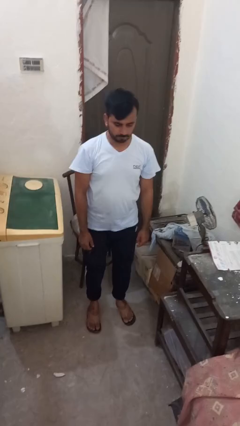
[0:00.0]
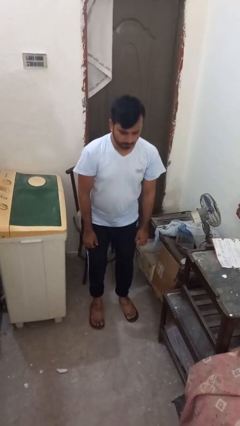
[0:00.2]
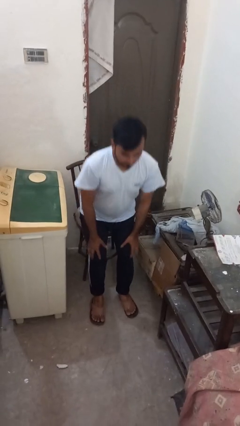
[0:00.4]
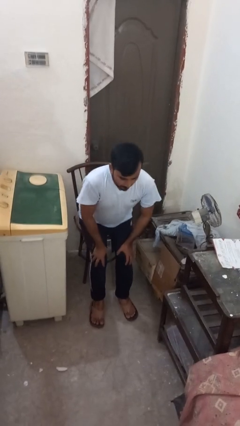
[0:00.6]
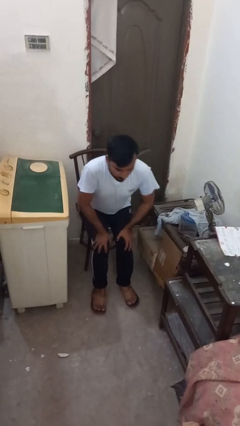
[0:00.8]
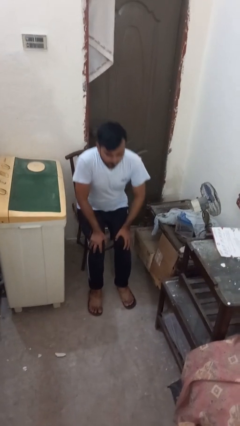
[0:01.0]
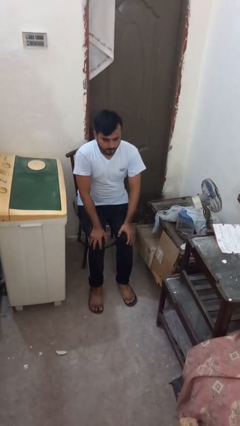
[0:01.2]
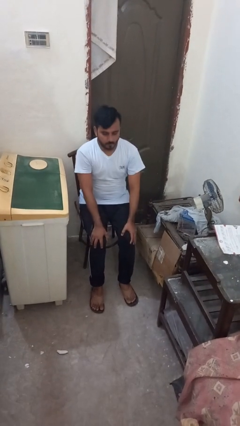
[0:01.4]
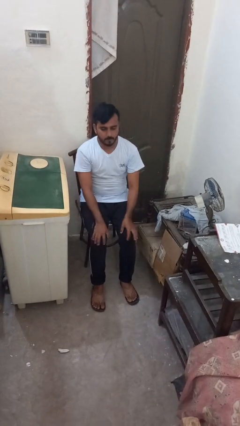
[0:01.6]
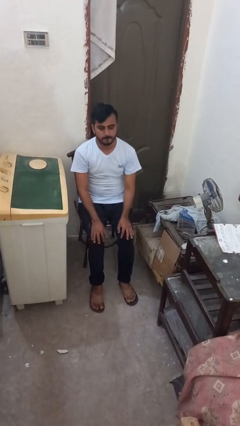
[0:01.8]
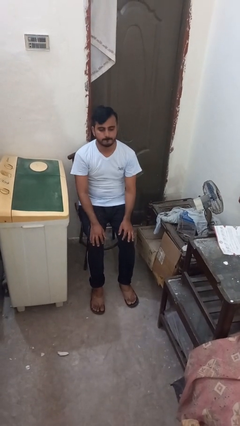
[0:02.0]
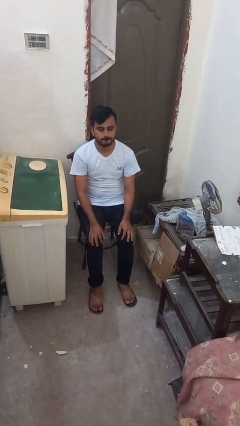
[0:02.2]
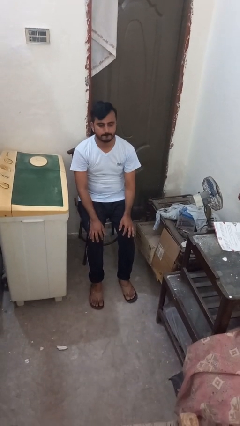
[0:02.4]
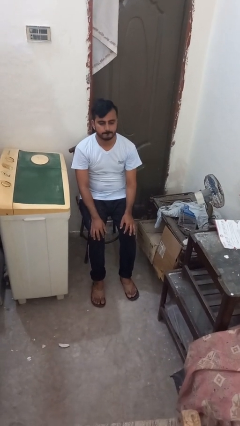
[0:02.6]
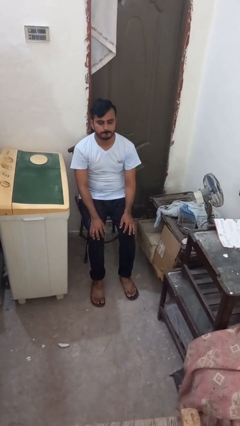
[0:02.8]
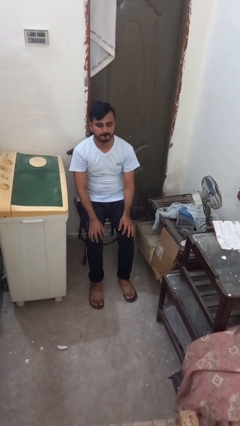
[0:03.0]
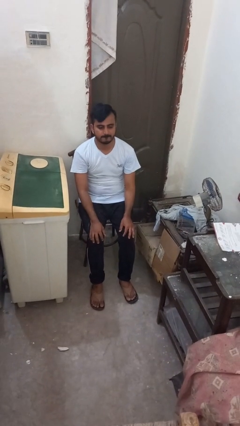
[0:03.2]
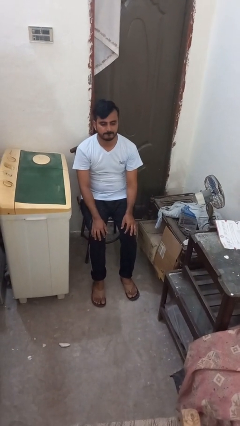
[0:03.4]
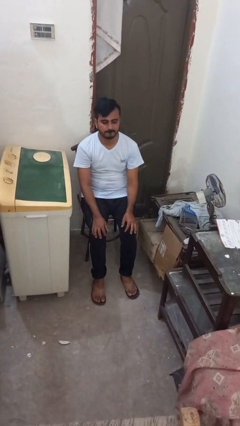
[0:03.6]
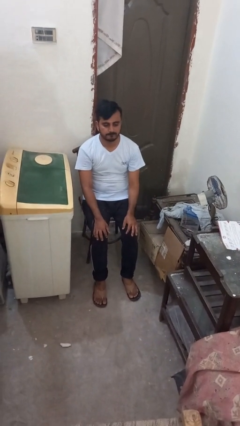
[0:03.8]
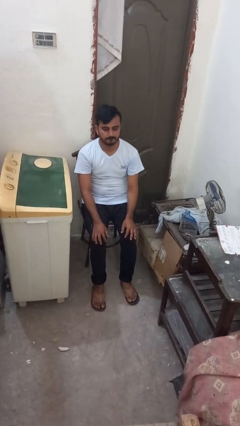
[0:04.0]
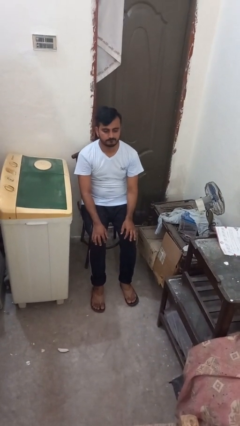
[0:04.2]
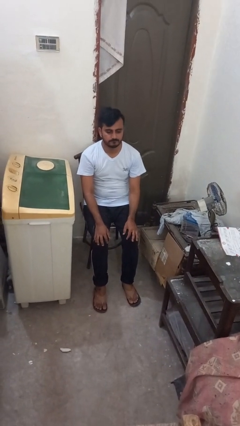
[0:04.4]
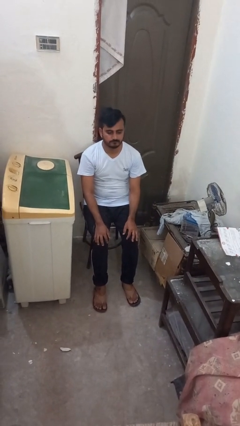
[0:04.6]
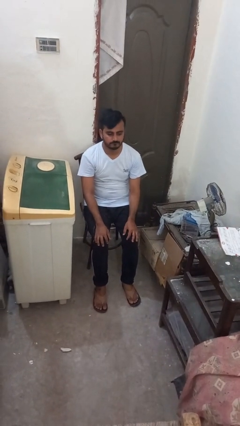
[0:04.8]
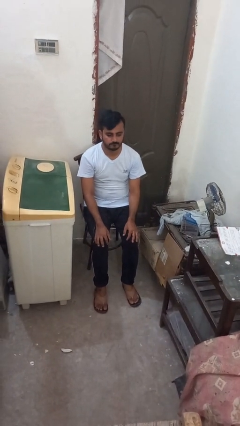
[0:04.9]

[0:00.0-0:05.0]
person sits down

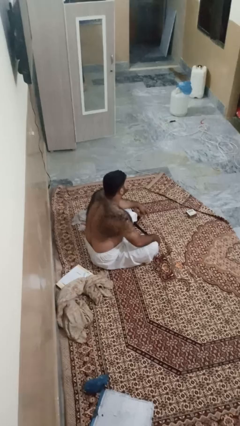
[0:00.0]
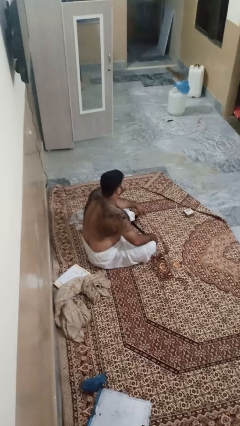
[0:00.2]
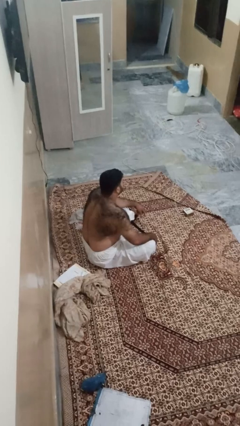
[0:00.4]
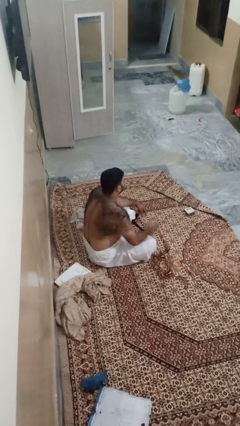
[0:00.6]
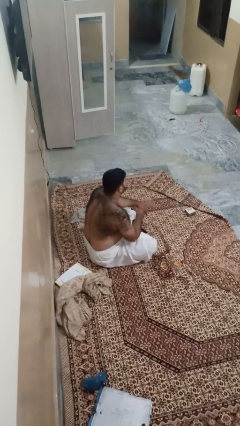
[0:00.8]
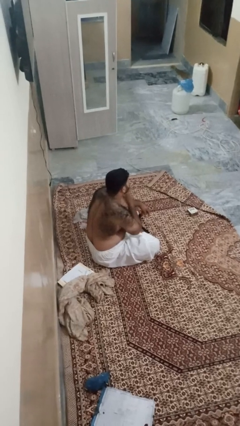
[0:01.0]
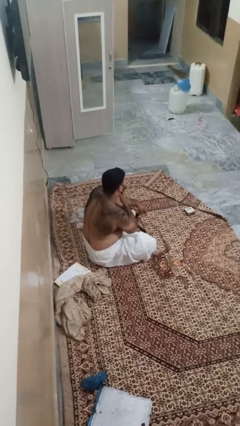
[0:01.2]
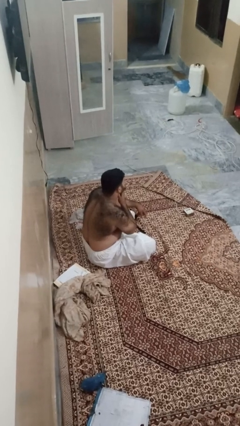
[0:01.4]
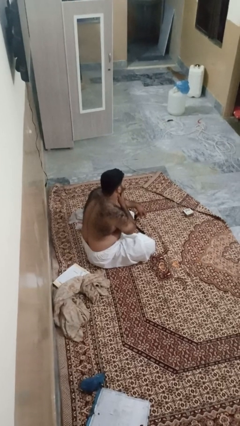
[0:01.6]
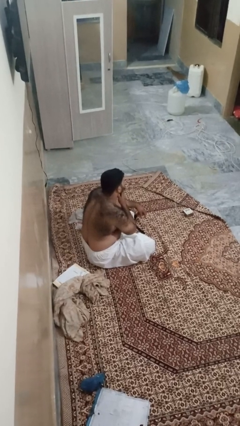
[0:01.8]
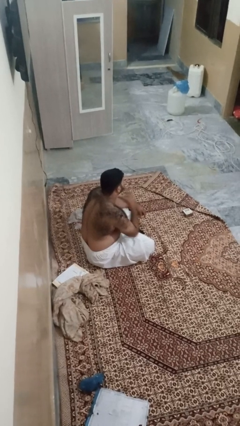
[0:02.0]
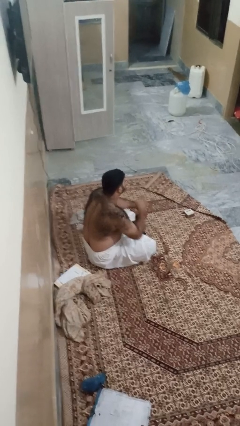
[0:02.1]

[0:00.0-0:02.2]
person strokes chin

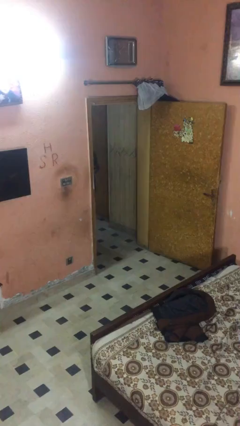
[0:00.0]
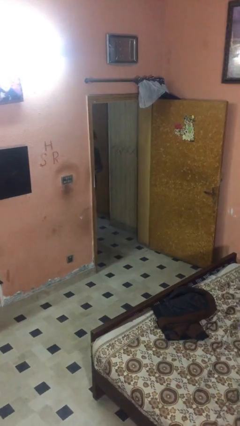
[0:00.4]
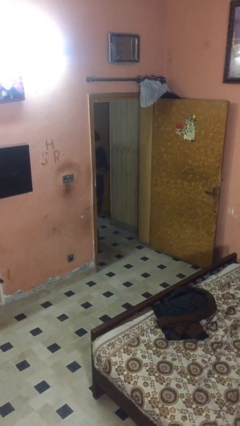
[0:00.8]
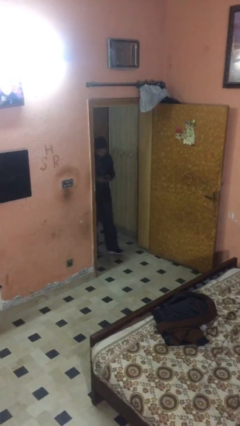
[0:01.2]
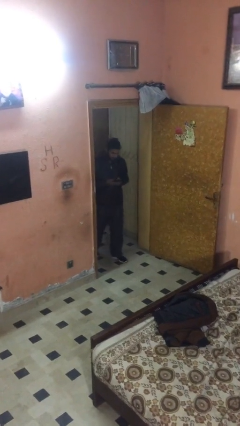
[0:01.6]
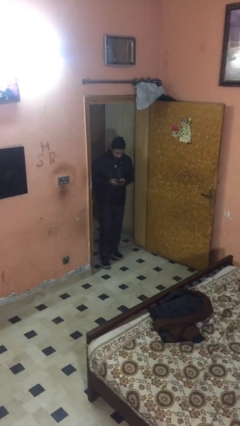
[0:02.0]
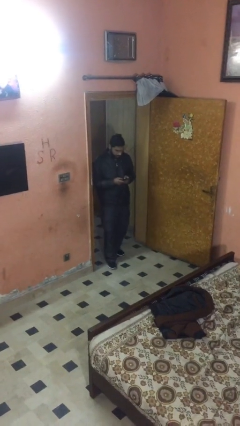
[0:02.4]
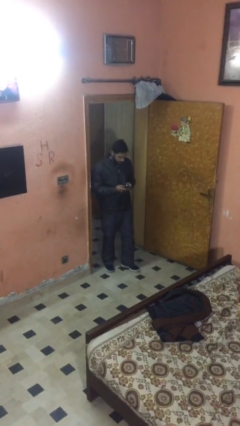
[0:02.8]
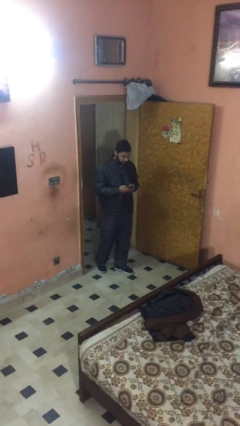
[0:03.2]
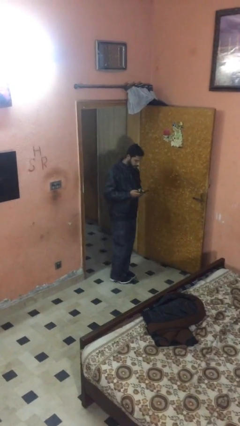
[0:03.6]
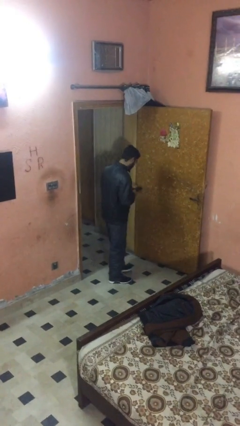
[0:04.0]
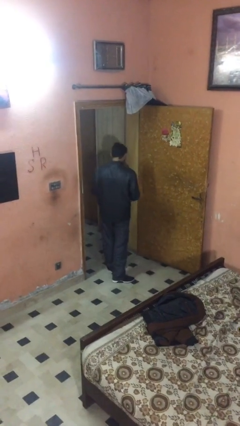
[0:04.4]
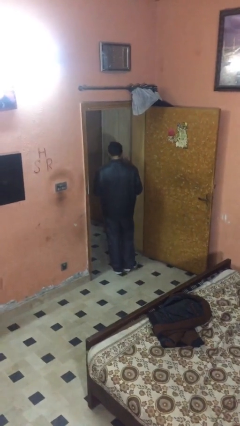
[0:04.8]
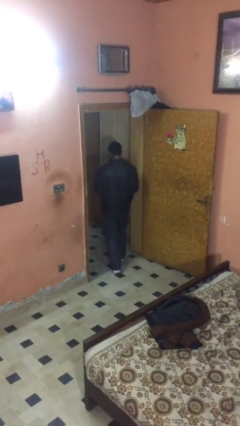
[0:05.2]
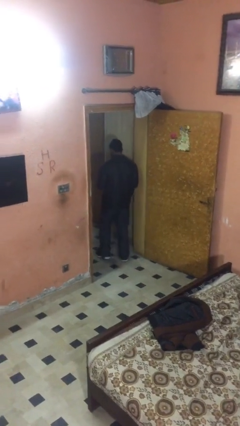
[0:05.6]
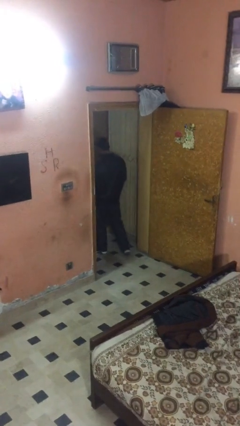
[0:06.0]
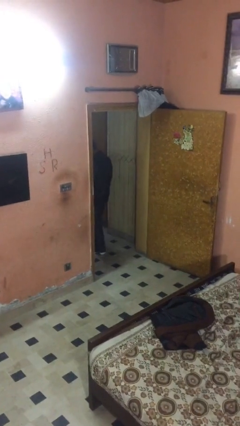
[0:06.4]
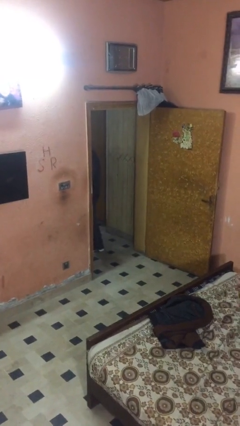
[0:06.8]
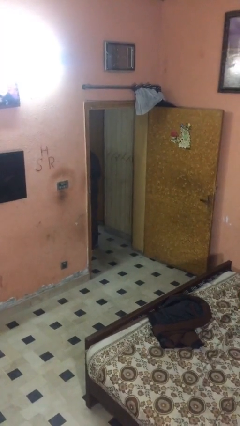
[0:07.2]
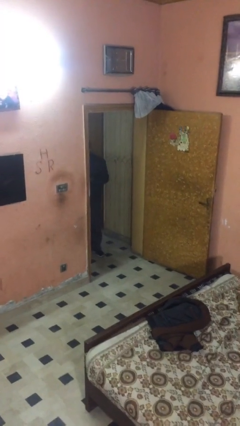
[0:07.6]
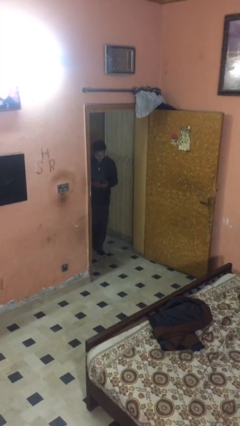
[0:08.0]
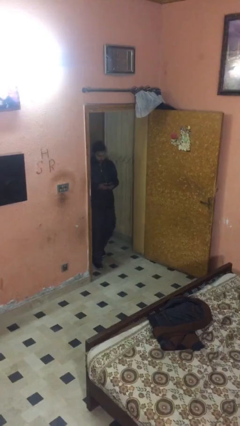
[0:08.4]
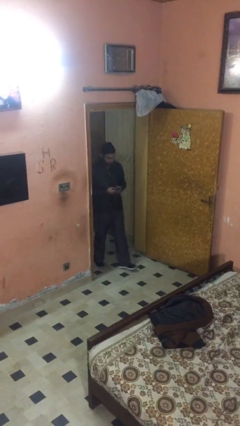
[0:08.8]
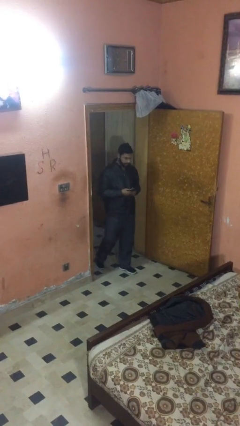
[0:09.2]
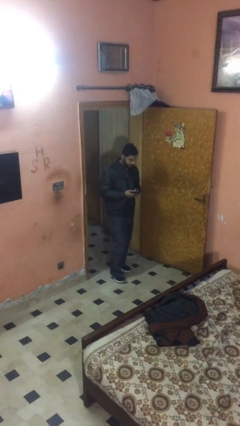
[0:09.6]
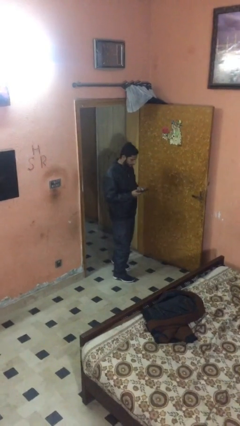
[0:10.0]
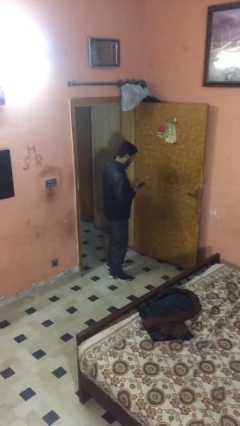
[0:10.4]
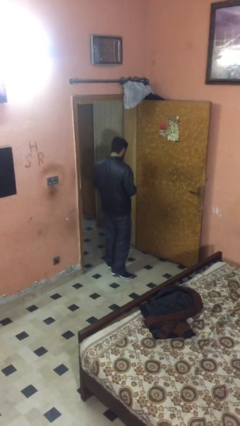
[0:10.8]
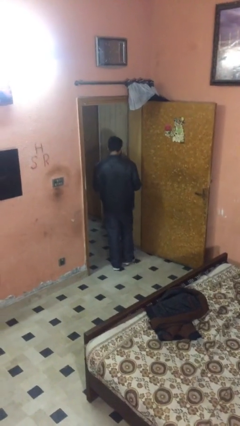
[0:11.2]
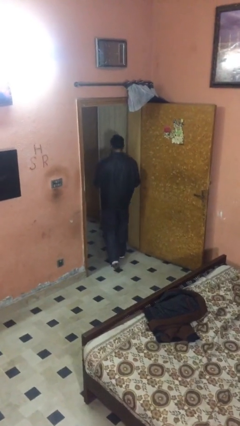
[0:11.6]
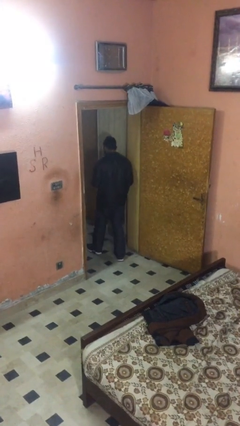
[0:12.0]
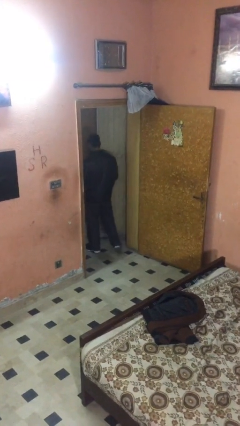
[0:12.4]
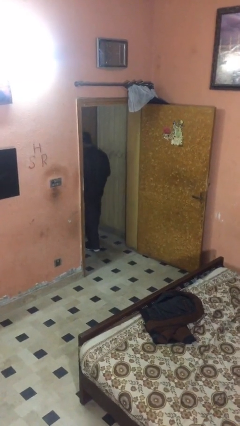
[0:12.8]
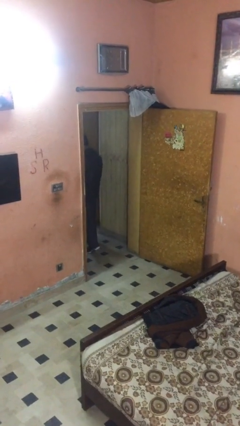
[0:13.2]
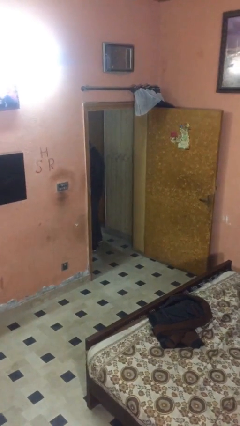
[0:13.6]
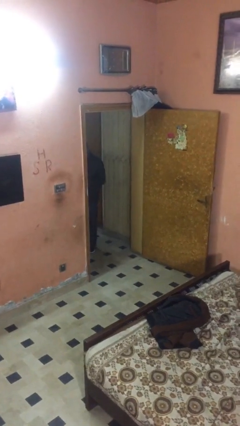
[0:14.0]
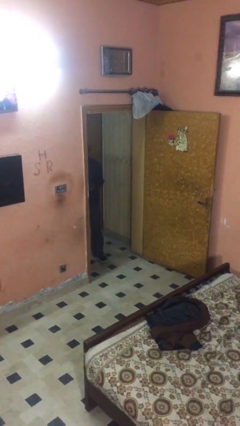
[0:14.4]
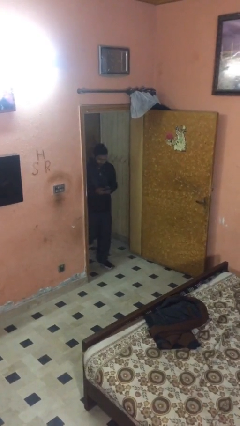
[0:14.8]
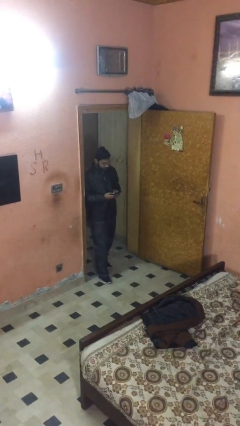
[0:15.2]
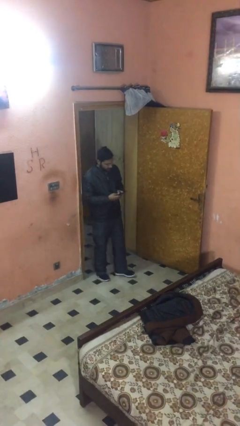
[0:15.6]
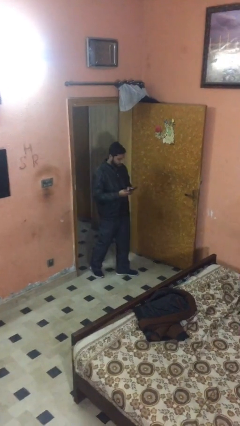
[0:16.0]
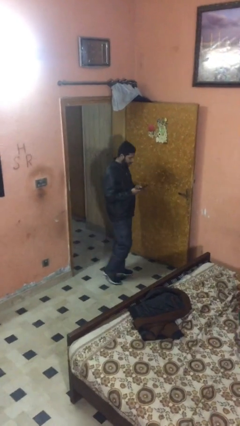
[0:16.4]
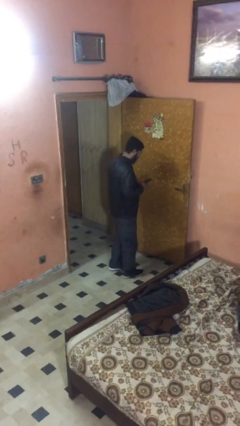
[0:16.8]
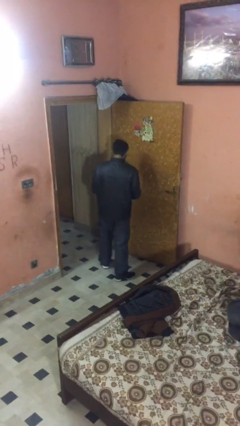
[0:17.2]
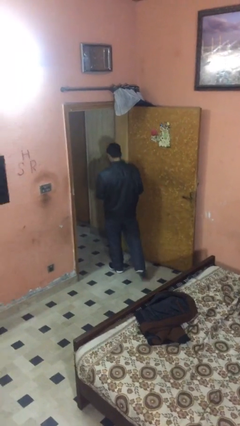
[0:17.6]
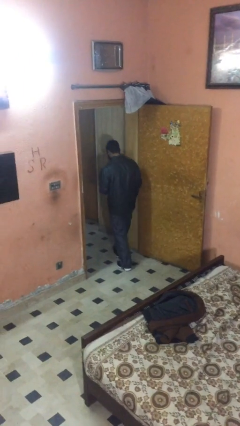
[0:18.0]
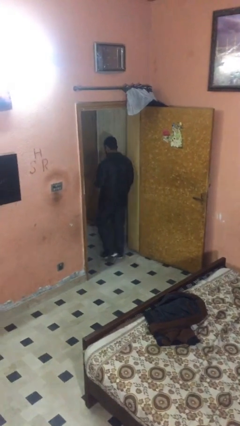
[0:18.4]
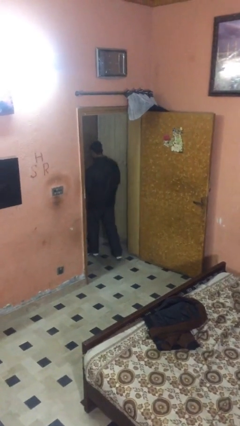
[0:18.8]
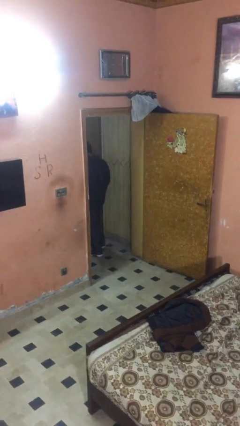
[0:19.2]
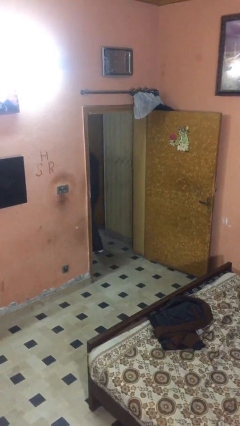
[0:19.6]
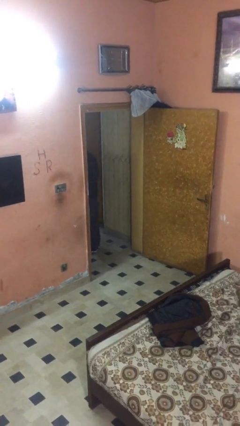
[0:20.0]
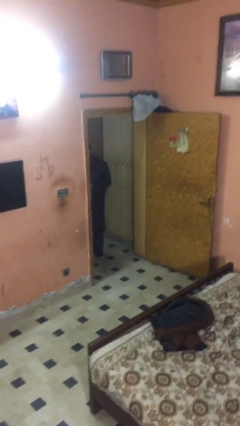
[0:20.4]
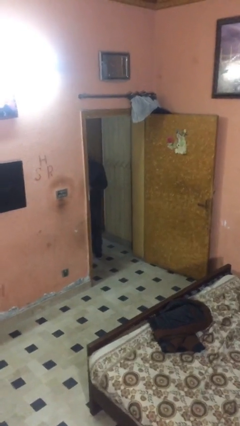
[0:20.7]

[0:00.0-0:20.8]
person texts on phone

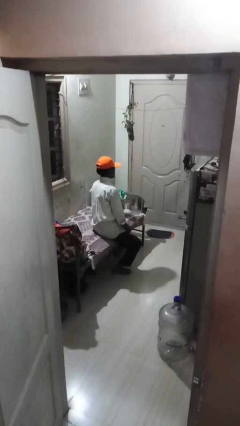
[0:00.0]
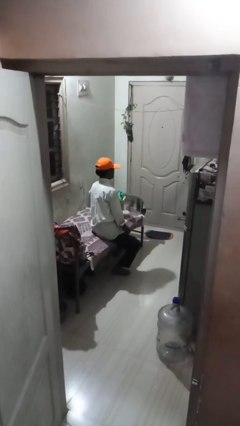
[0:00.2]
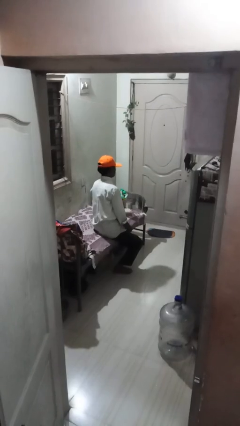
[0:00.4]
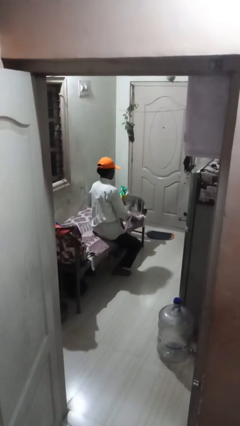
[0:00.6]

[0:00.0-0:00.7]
person eats snack from bag
